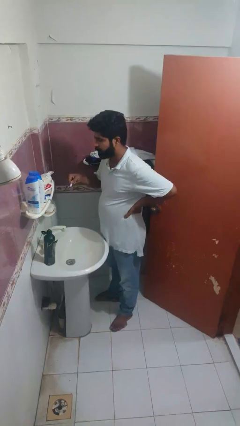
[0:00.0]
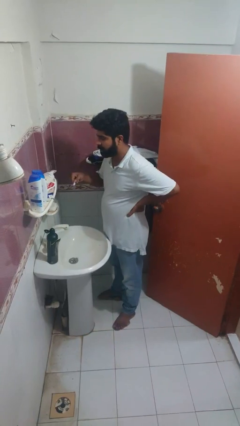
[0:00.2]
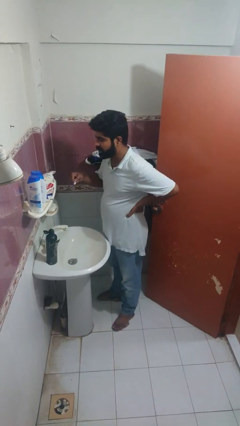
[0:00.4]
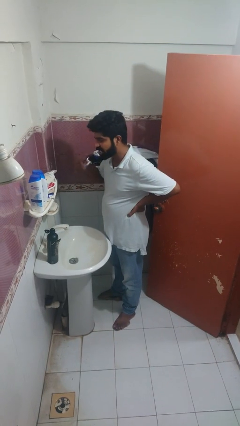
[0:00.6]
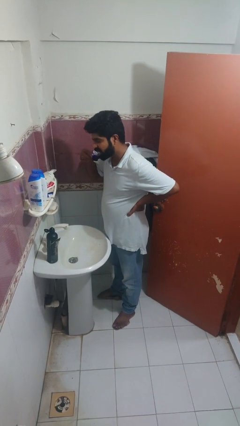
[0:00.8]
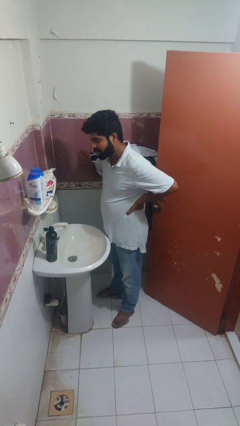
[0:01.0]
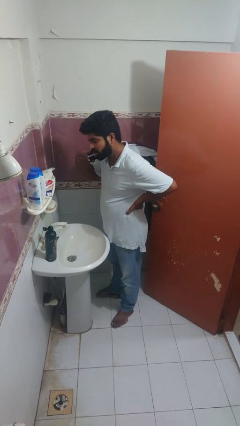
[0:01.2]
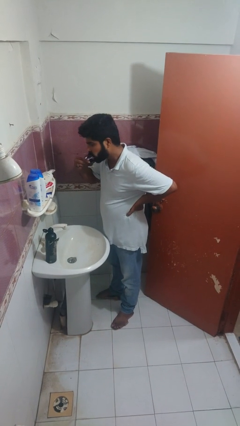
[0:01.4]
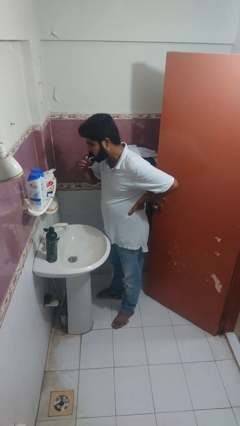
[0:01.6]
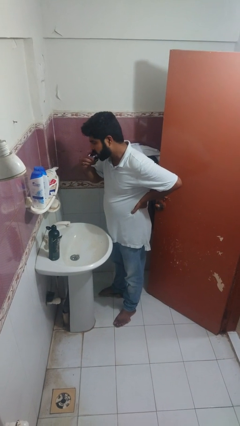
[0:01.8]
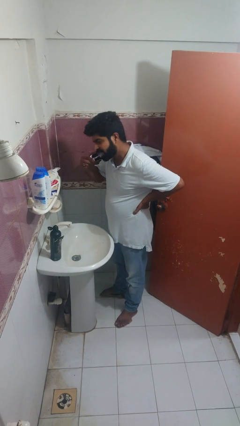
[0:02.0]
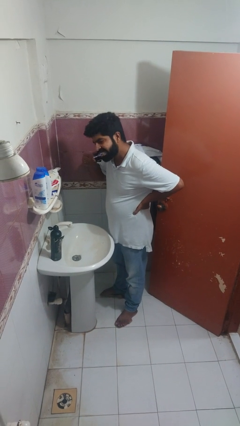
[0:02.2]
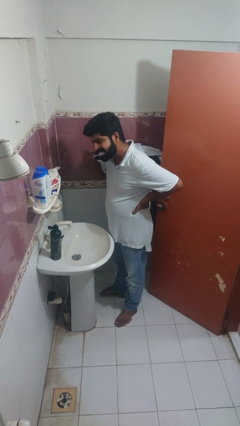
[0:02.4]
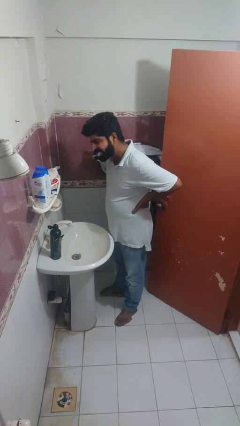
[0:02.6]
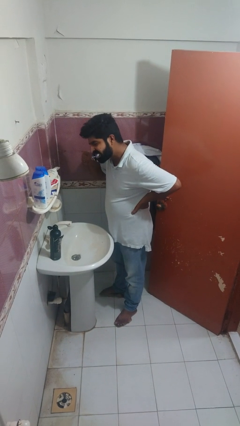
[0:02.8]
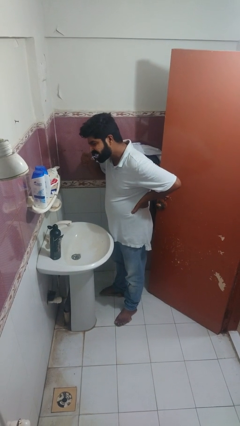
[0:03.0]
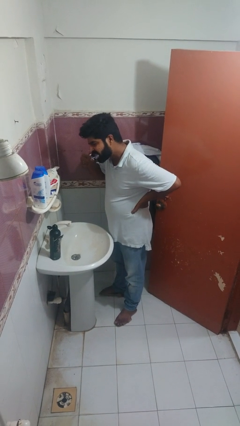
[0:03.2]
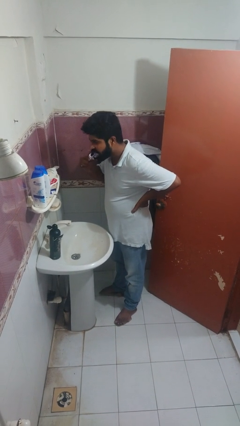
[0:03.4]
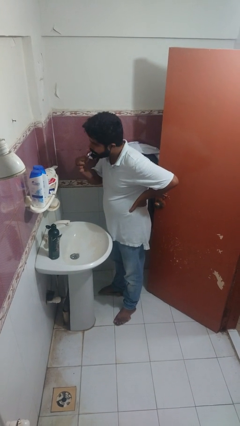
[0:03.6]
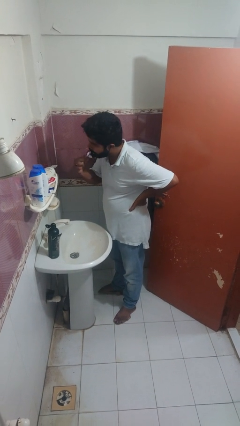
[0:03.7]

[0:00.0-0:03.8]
person brushes teeth

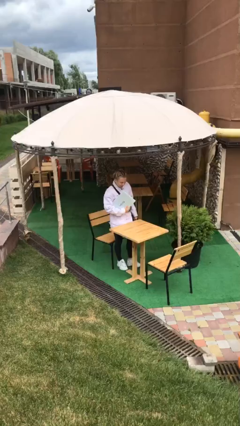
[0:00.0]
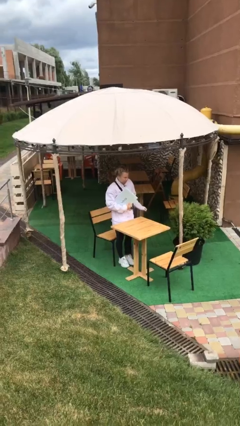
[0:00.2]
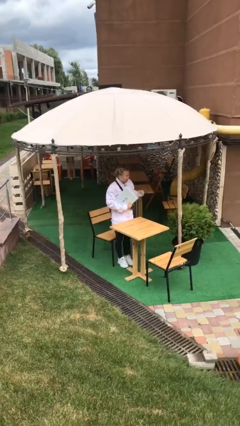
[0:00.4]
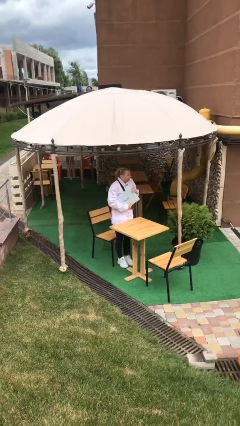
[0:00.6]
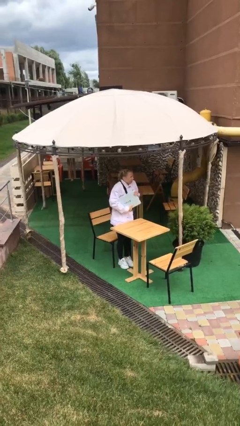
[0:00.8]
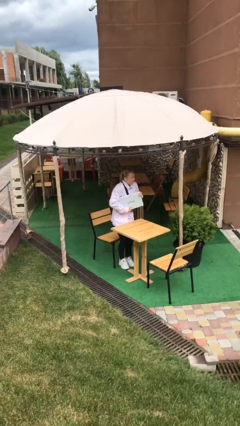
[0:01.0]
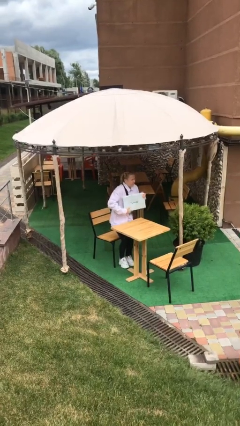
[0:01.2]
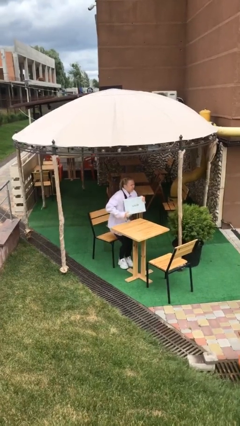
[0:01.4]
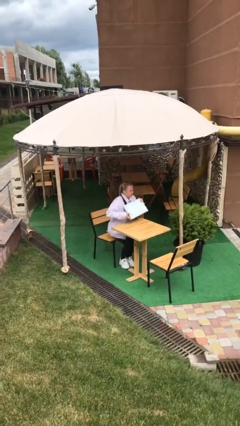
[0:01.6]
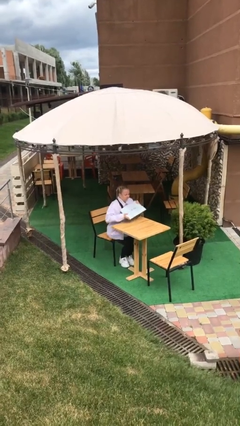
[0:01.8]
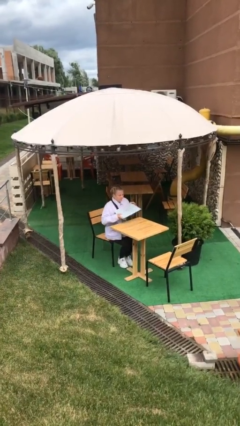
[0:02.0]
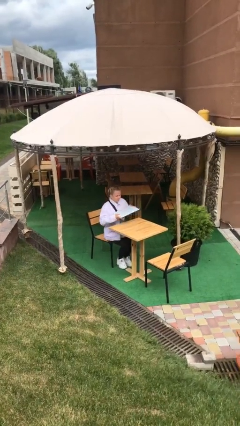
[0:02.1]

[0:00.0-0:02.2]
person sits down

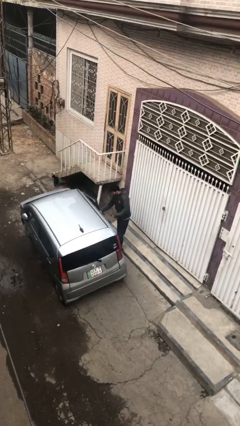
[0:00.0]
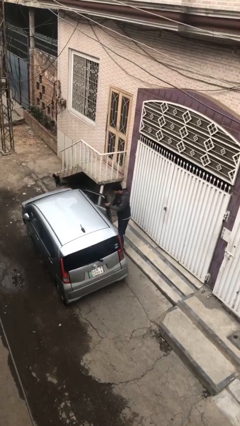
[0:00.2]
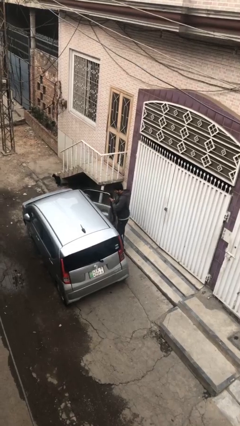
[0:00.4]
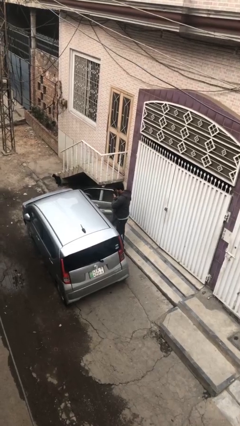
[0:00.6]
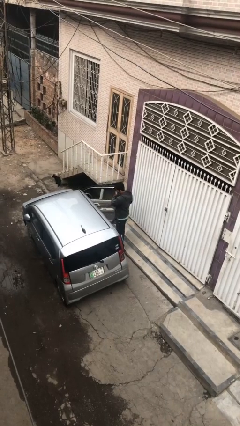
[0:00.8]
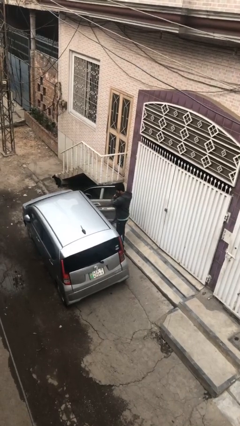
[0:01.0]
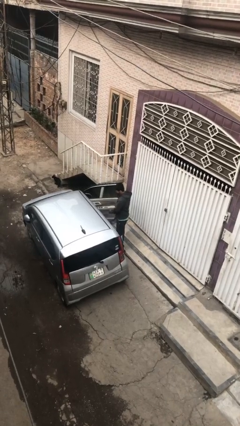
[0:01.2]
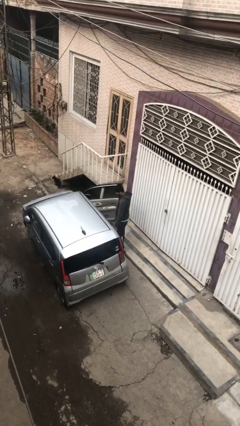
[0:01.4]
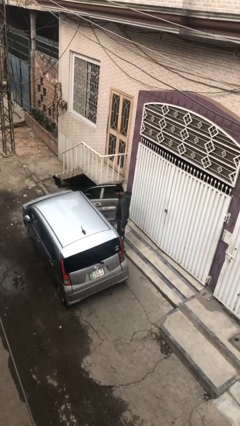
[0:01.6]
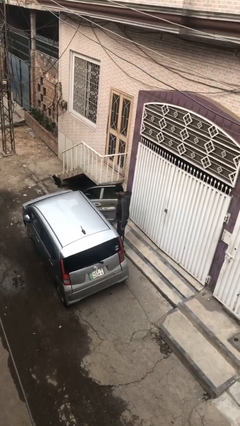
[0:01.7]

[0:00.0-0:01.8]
person opens car door

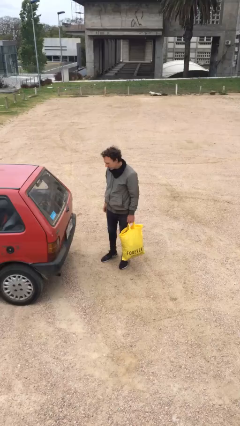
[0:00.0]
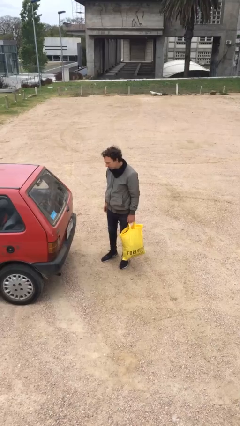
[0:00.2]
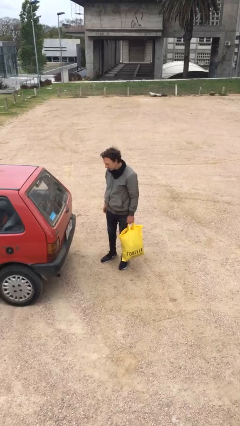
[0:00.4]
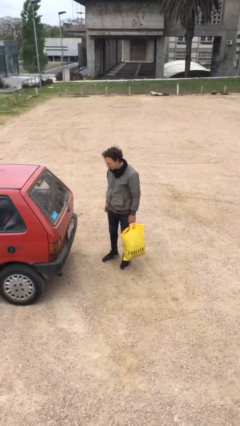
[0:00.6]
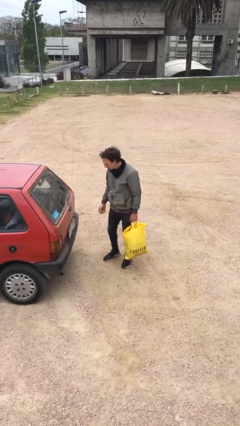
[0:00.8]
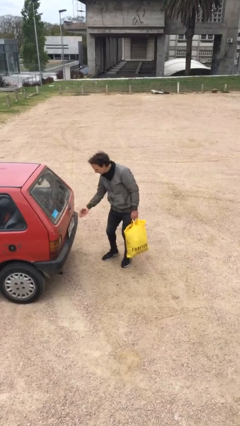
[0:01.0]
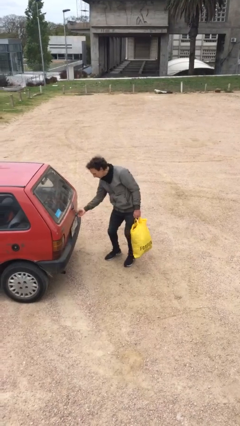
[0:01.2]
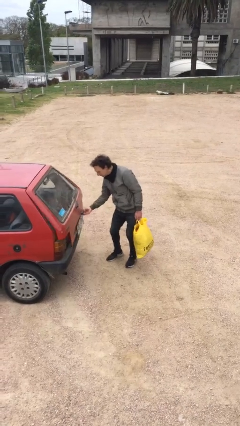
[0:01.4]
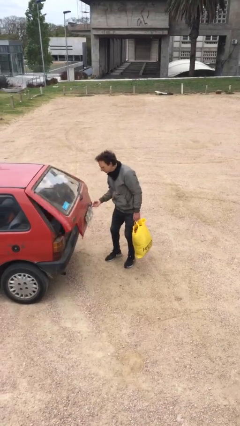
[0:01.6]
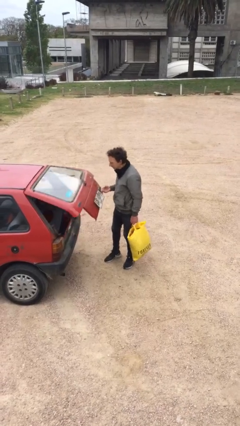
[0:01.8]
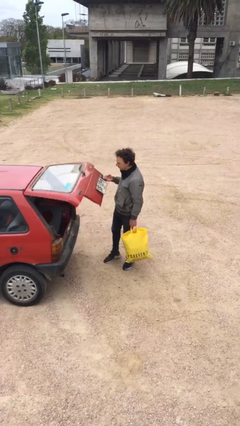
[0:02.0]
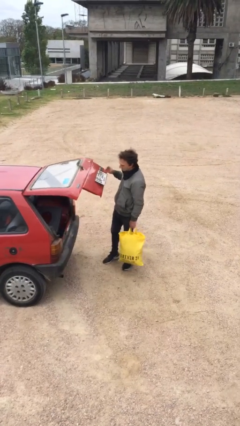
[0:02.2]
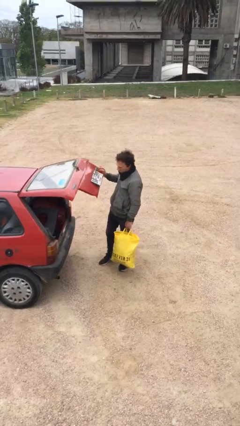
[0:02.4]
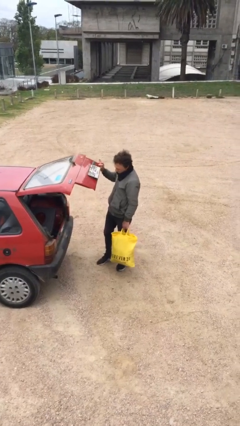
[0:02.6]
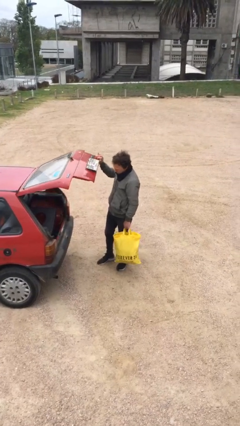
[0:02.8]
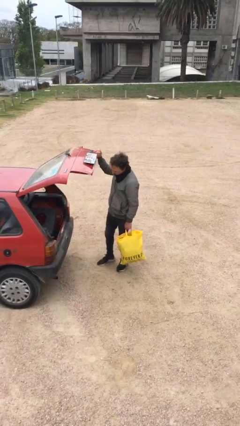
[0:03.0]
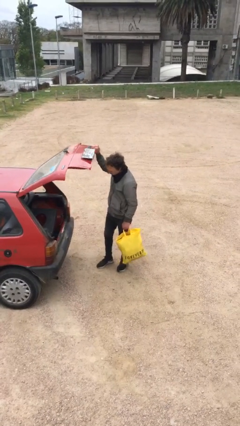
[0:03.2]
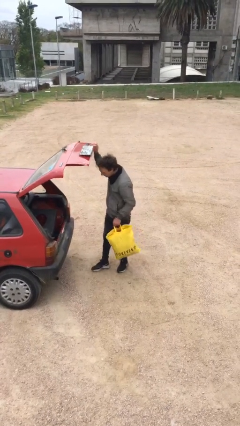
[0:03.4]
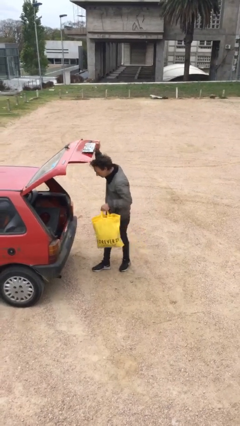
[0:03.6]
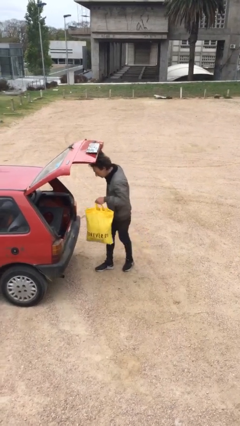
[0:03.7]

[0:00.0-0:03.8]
person opens car trunk

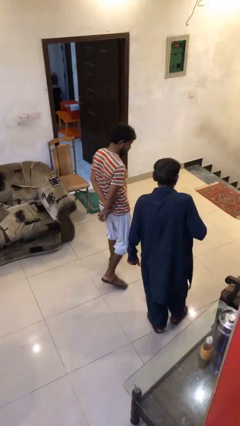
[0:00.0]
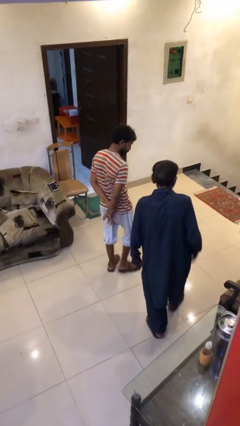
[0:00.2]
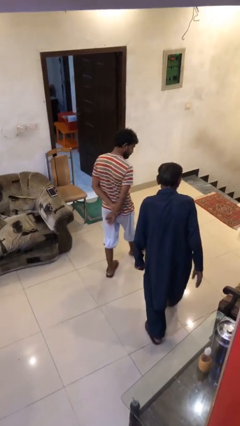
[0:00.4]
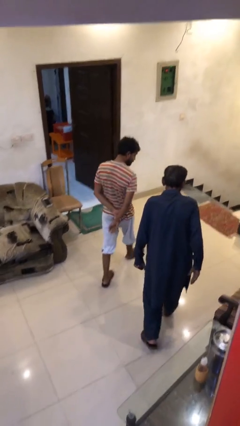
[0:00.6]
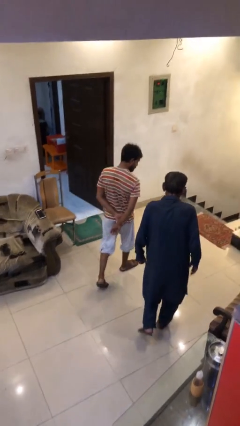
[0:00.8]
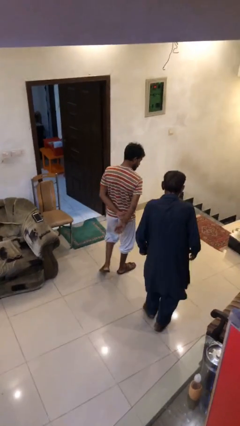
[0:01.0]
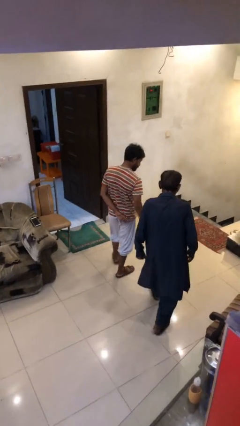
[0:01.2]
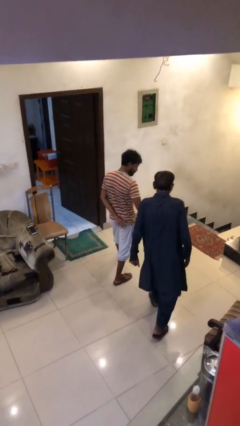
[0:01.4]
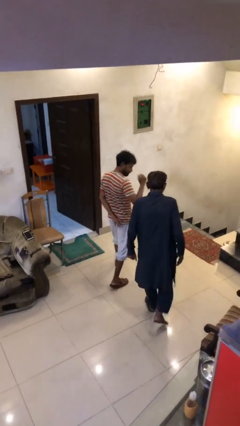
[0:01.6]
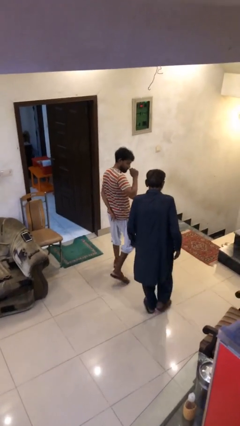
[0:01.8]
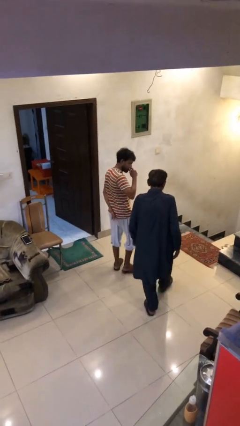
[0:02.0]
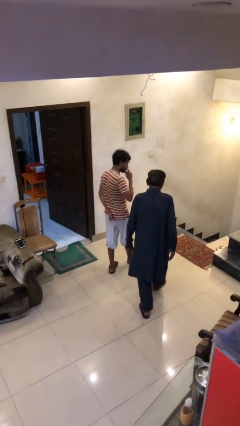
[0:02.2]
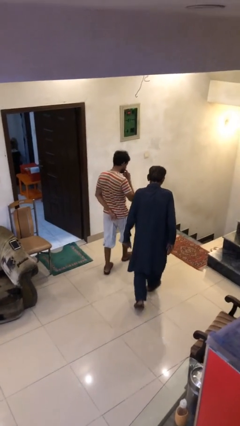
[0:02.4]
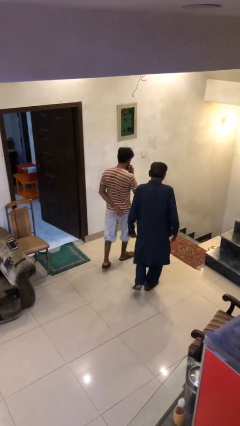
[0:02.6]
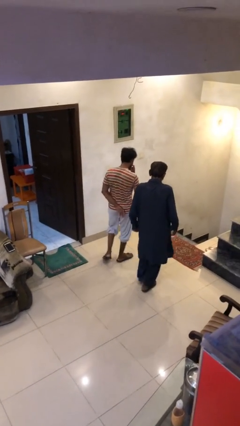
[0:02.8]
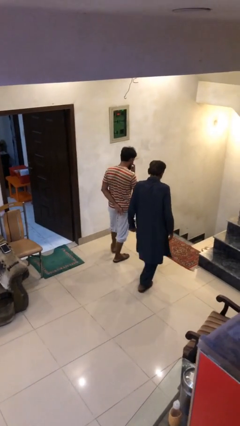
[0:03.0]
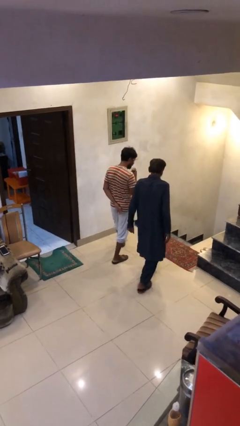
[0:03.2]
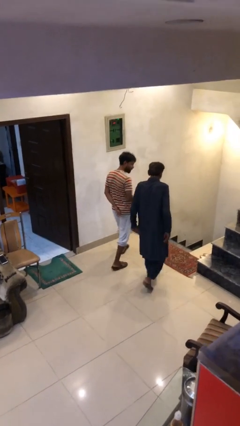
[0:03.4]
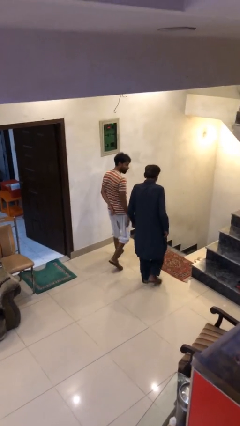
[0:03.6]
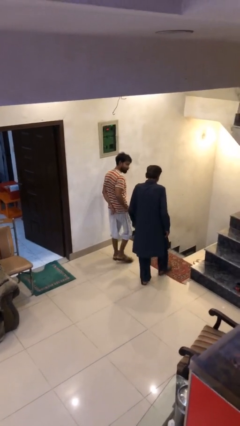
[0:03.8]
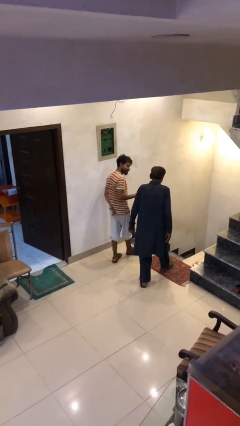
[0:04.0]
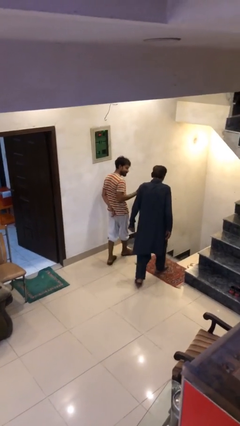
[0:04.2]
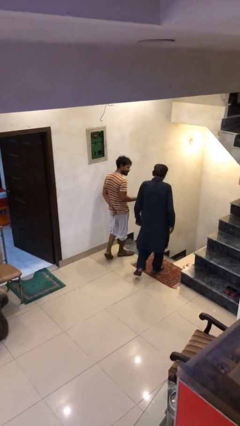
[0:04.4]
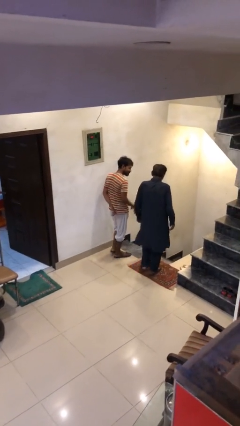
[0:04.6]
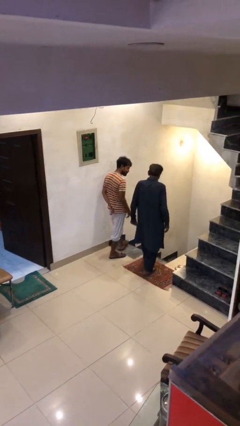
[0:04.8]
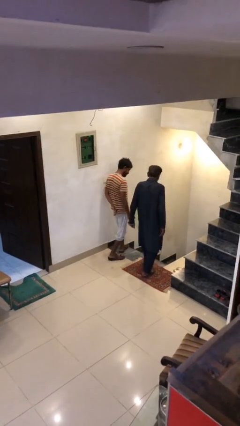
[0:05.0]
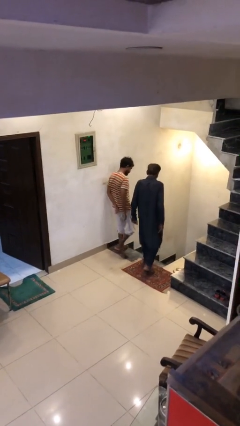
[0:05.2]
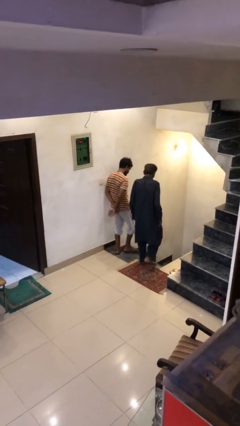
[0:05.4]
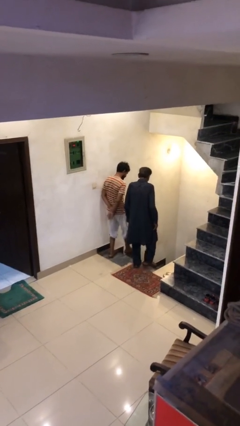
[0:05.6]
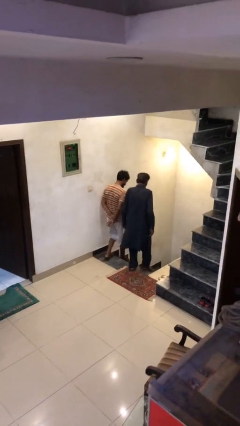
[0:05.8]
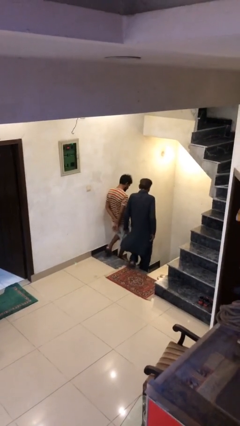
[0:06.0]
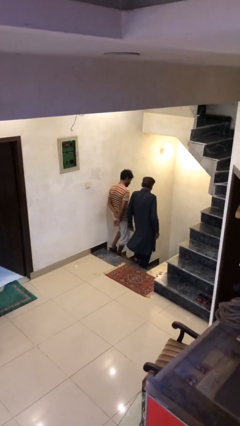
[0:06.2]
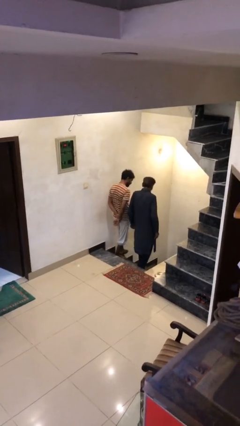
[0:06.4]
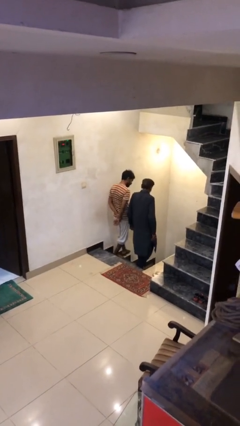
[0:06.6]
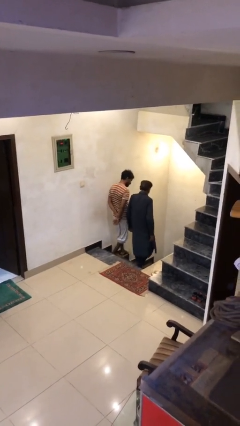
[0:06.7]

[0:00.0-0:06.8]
person talks to person
